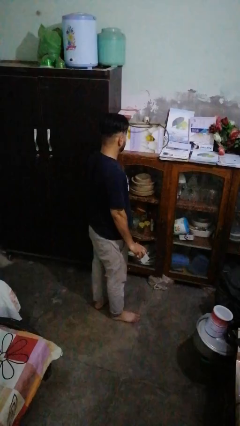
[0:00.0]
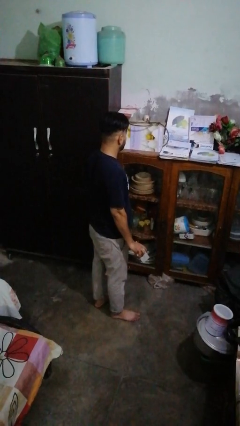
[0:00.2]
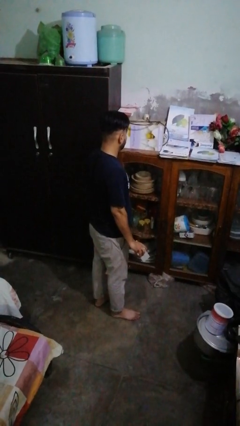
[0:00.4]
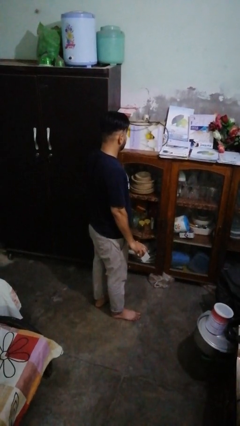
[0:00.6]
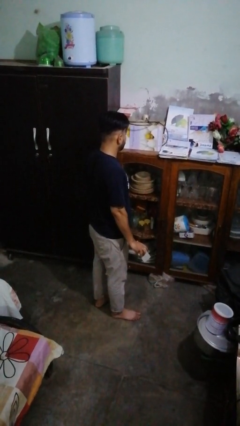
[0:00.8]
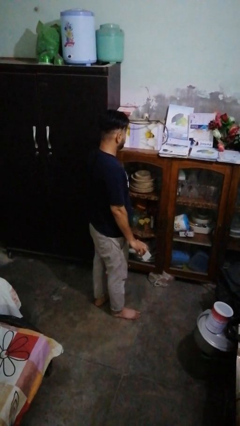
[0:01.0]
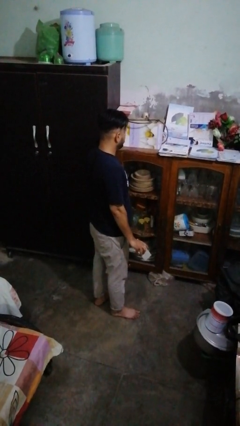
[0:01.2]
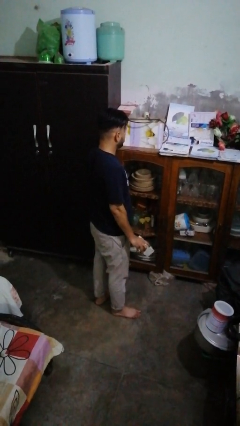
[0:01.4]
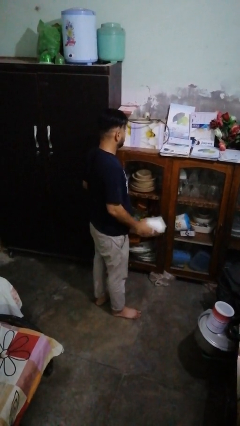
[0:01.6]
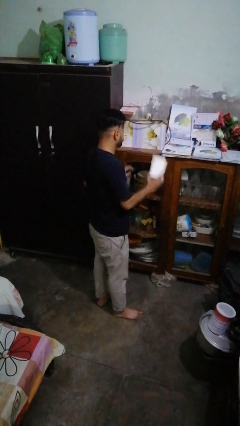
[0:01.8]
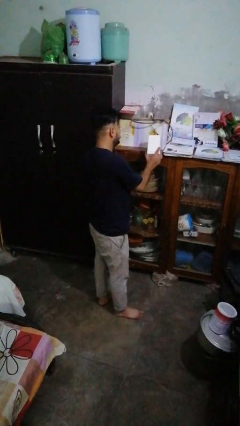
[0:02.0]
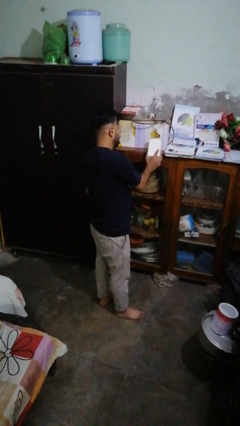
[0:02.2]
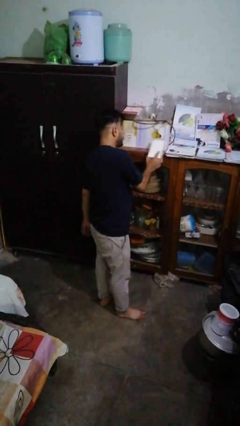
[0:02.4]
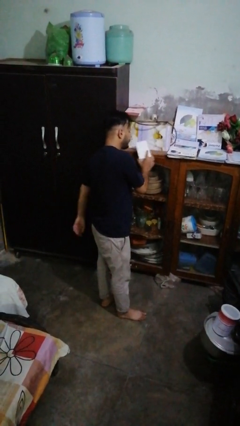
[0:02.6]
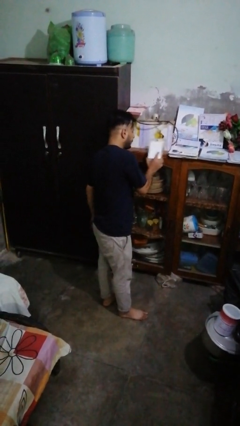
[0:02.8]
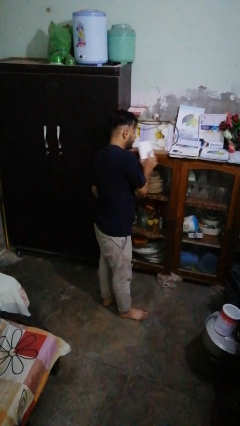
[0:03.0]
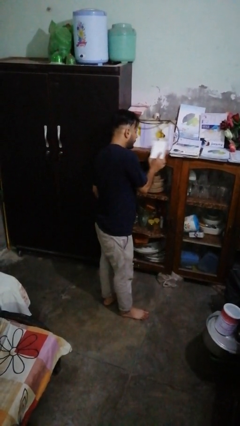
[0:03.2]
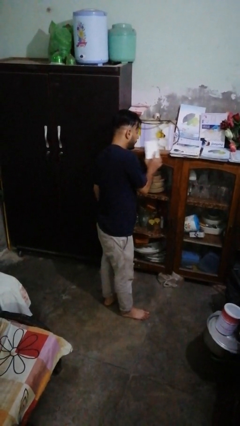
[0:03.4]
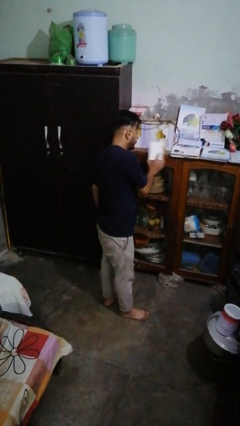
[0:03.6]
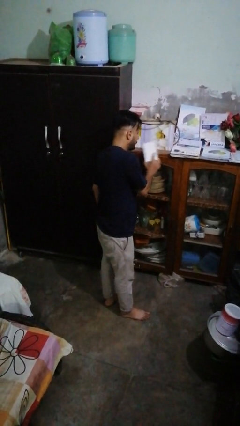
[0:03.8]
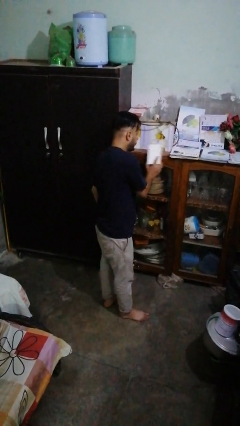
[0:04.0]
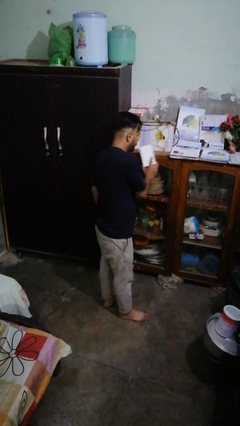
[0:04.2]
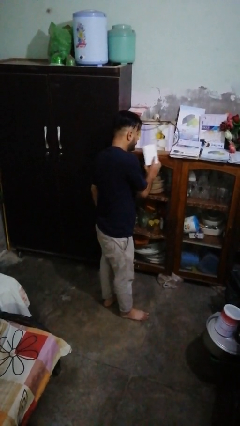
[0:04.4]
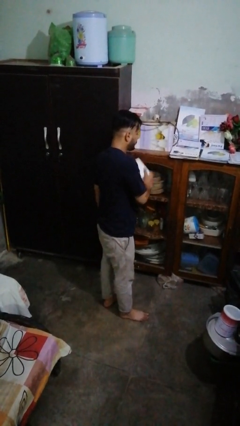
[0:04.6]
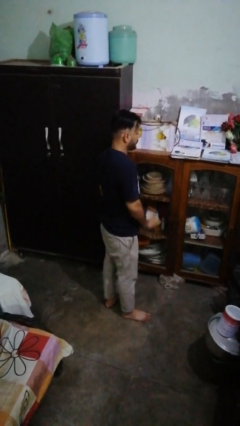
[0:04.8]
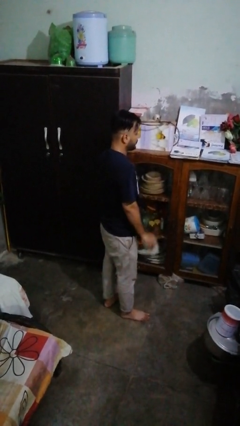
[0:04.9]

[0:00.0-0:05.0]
person dusts furniture

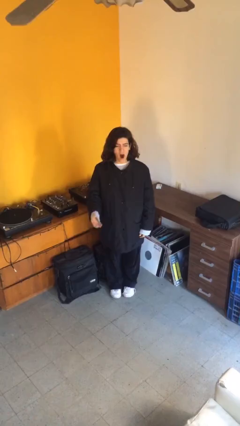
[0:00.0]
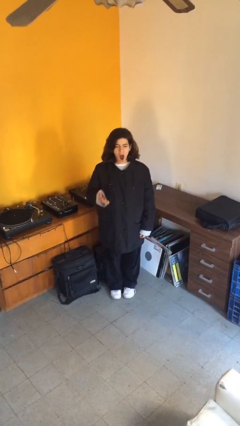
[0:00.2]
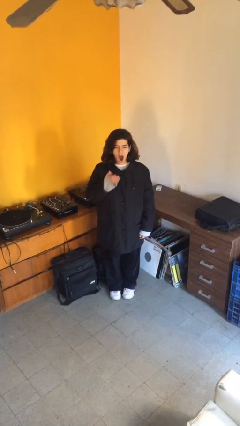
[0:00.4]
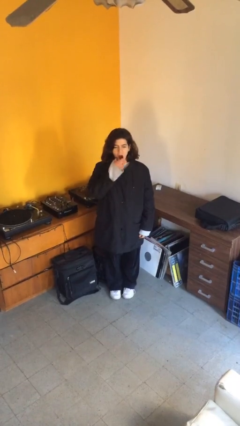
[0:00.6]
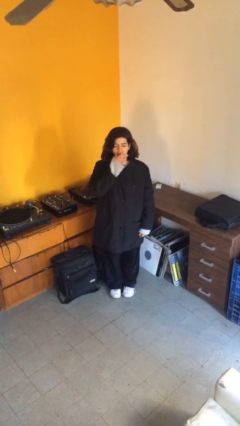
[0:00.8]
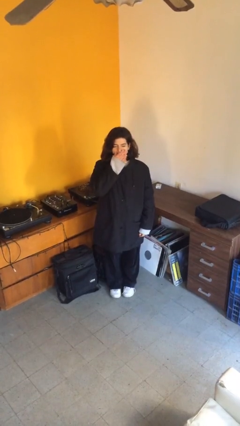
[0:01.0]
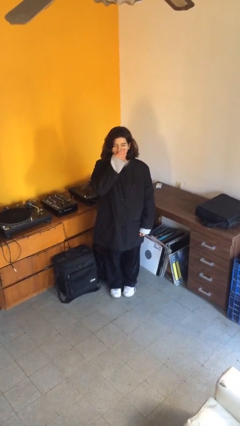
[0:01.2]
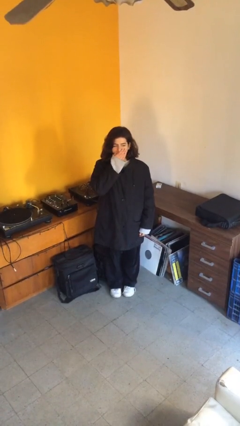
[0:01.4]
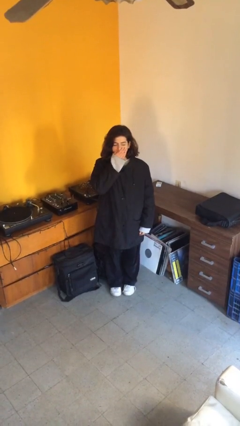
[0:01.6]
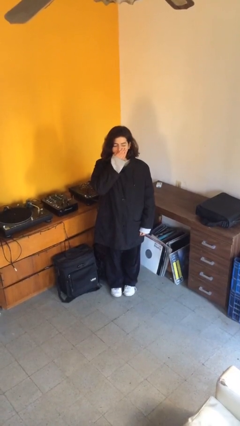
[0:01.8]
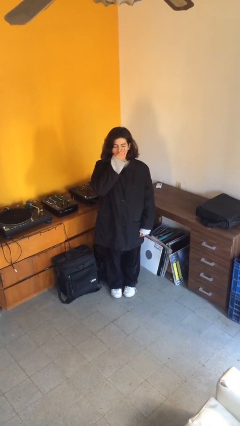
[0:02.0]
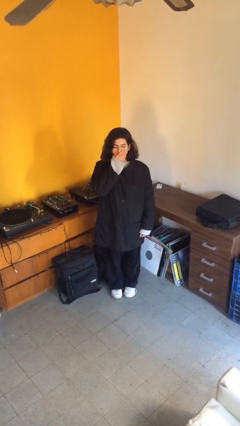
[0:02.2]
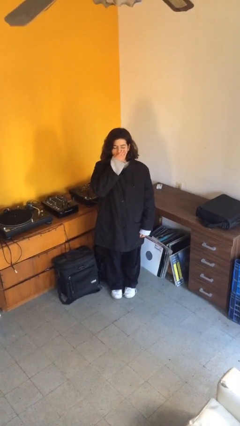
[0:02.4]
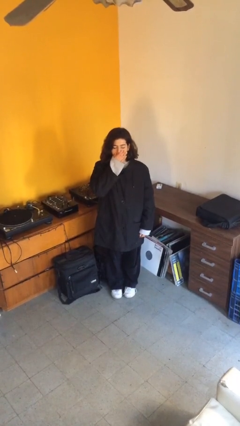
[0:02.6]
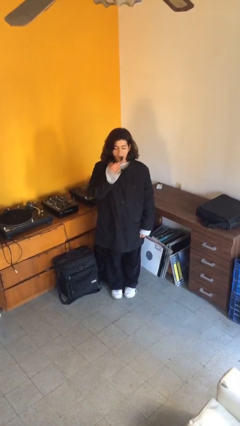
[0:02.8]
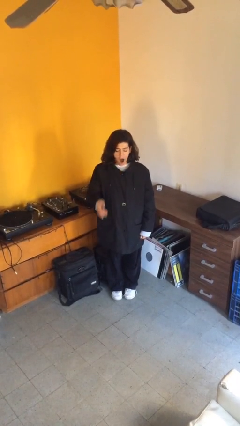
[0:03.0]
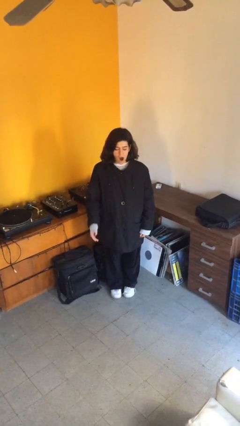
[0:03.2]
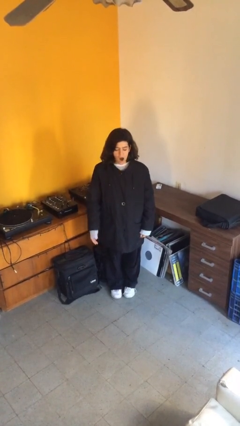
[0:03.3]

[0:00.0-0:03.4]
person yawns

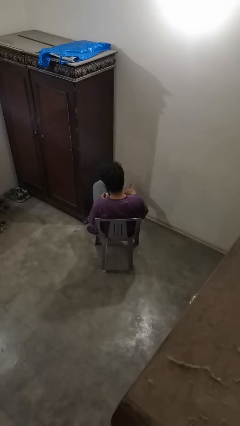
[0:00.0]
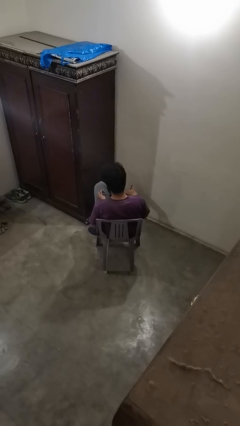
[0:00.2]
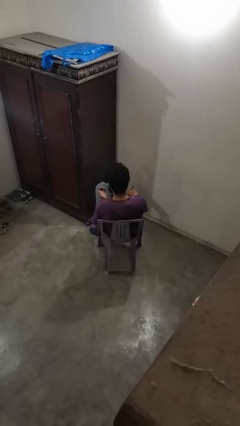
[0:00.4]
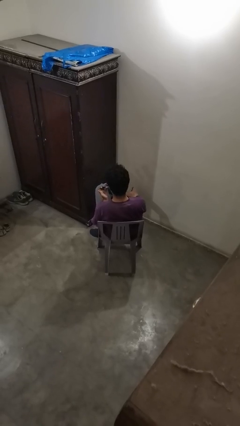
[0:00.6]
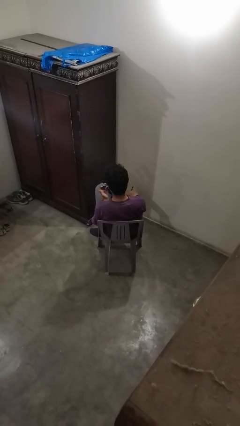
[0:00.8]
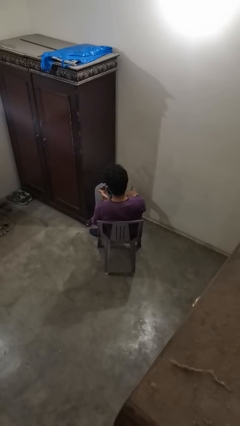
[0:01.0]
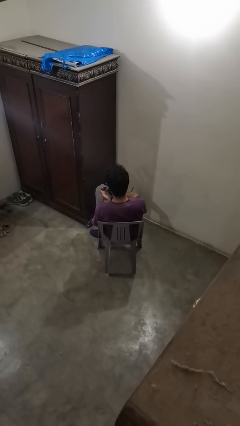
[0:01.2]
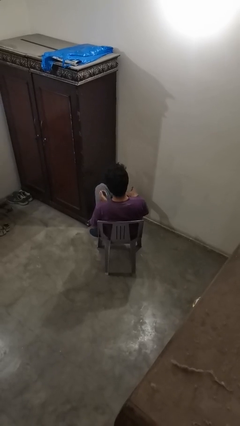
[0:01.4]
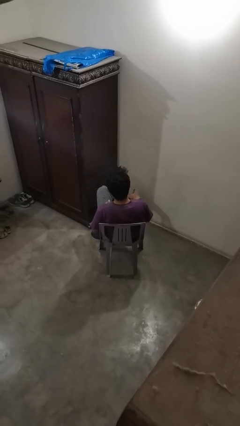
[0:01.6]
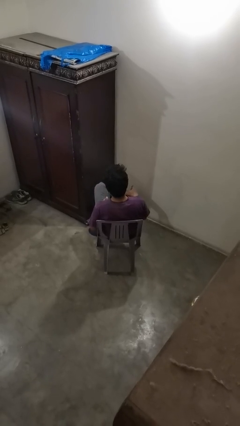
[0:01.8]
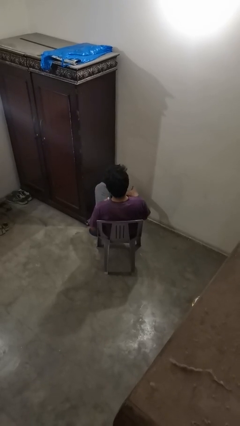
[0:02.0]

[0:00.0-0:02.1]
person clips fingernails

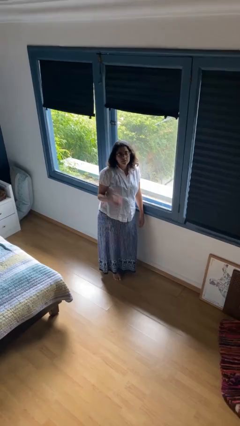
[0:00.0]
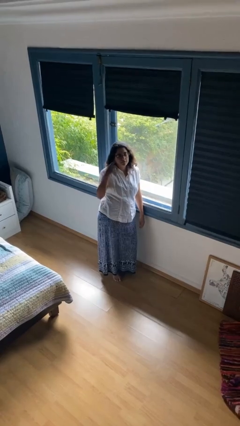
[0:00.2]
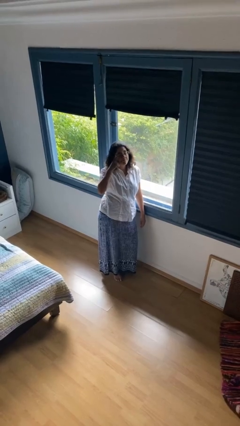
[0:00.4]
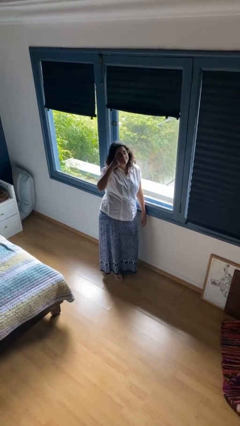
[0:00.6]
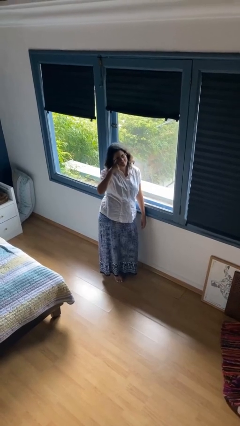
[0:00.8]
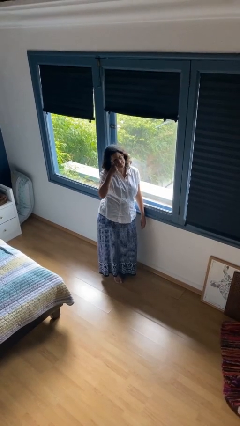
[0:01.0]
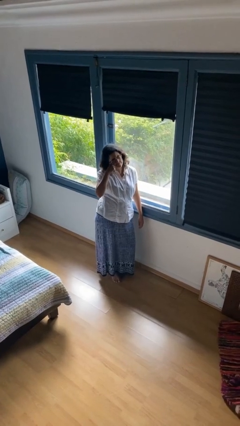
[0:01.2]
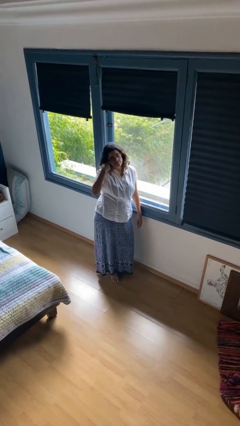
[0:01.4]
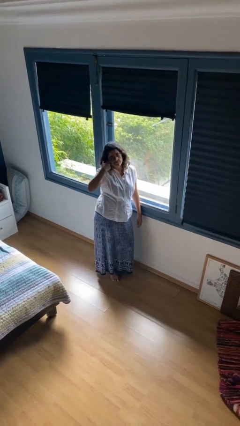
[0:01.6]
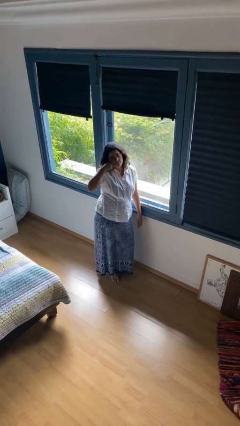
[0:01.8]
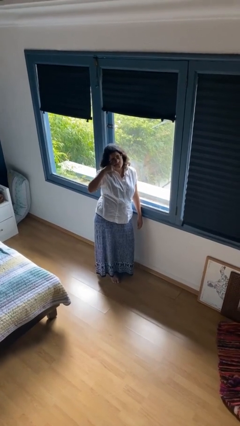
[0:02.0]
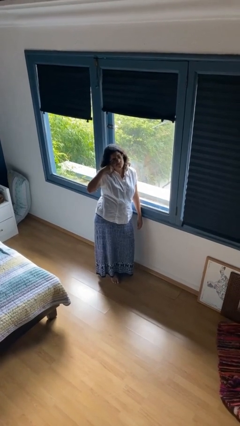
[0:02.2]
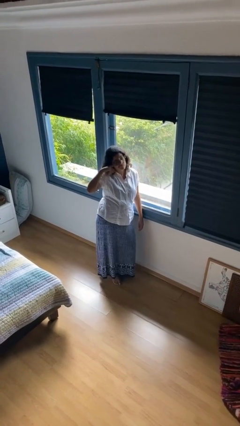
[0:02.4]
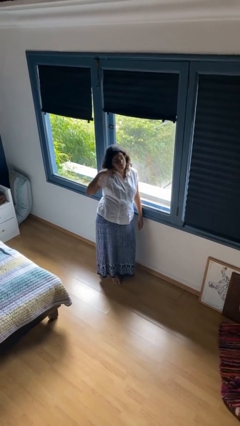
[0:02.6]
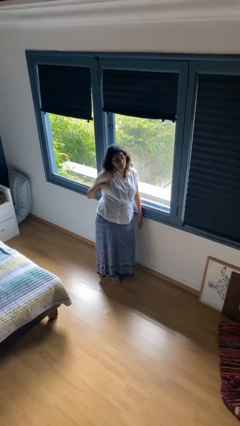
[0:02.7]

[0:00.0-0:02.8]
person rubs eyes

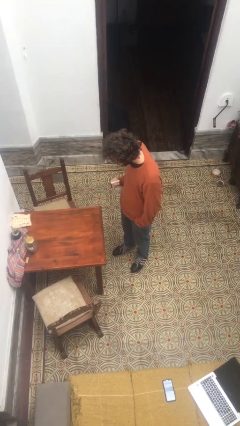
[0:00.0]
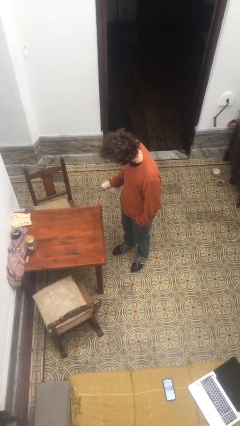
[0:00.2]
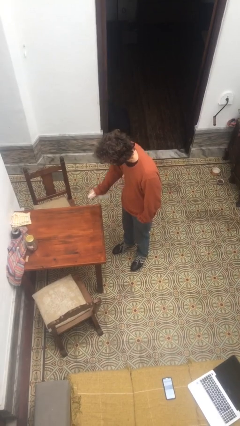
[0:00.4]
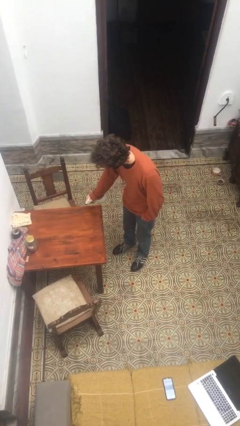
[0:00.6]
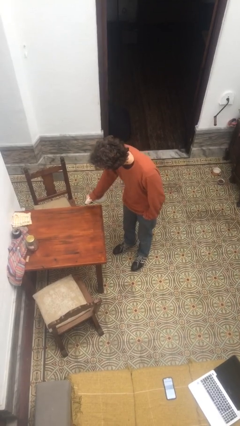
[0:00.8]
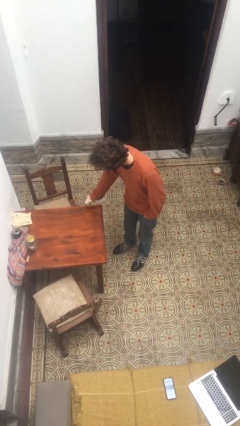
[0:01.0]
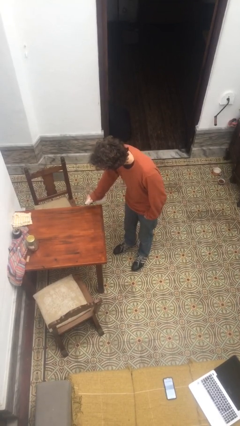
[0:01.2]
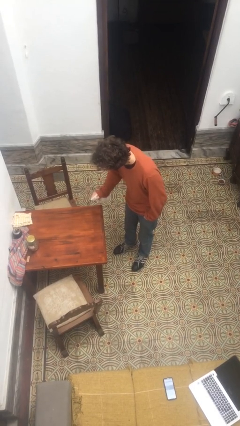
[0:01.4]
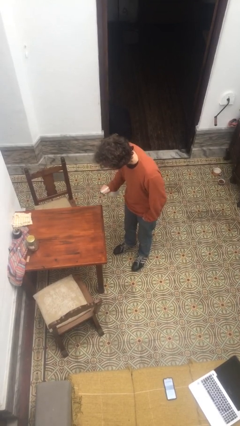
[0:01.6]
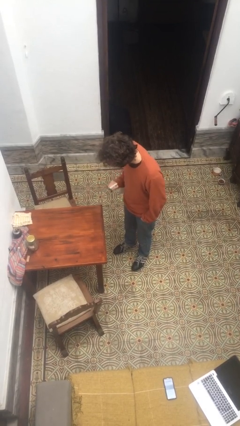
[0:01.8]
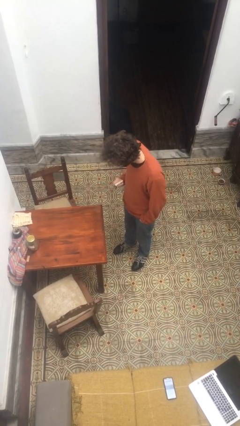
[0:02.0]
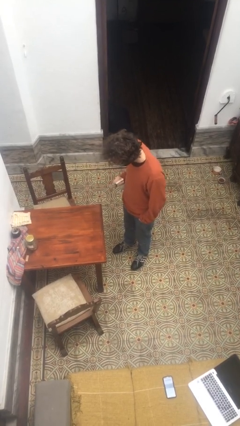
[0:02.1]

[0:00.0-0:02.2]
person sprays from bottle

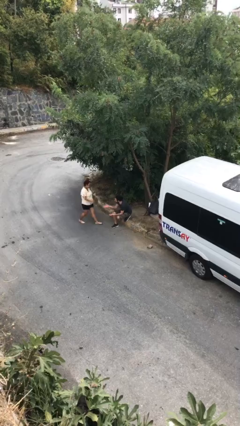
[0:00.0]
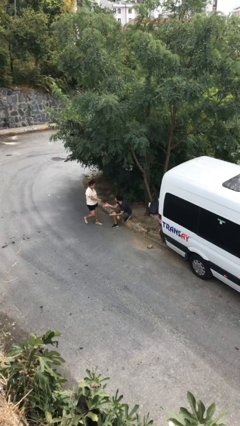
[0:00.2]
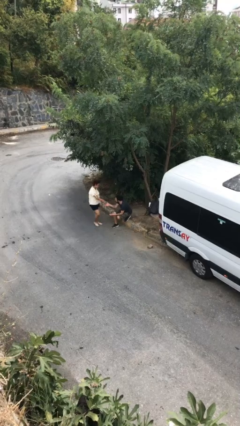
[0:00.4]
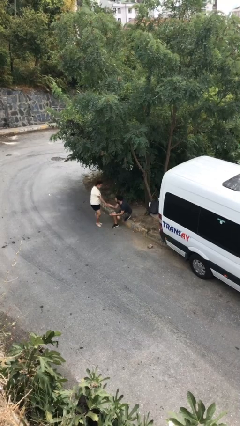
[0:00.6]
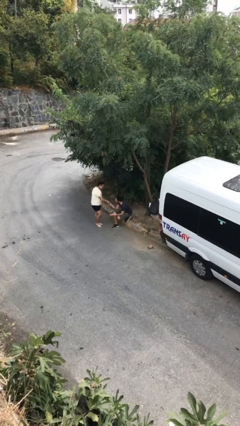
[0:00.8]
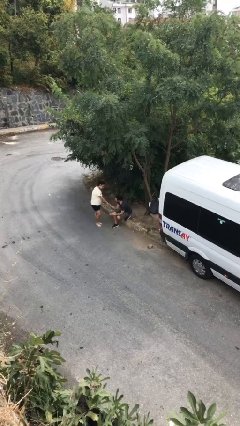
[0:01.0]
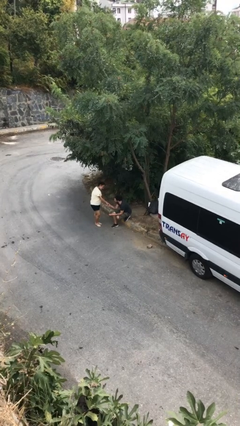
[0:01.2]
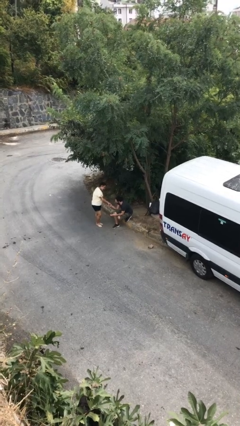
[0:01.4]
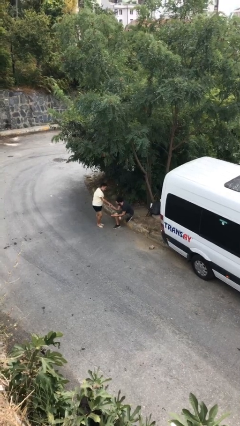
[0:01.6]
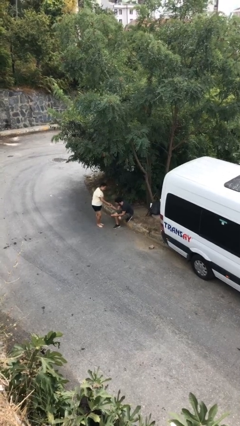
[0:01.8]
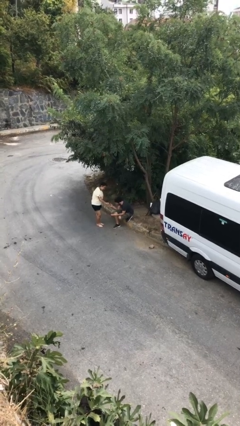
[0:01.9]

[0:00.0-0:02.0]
person shakes hand
